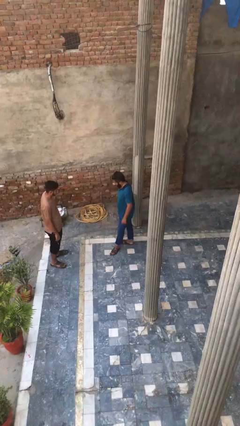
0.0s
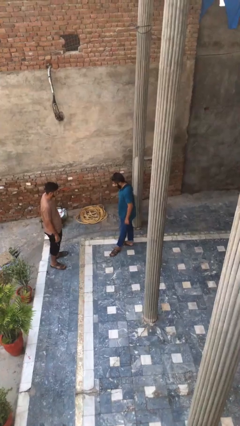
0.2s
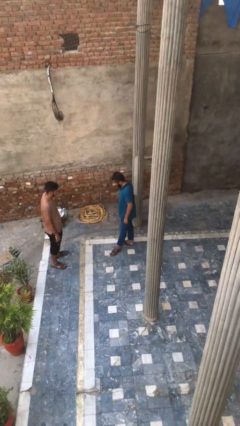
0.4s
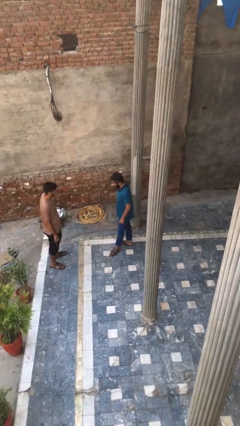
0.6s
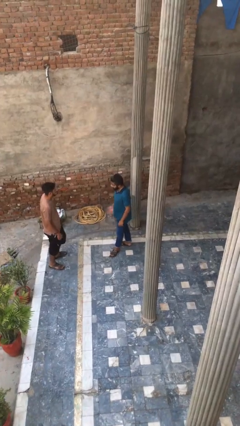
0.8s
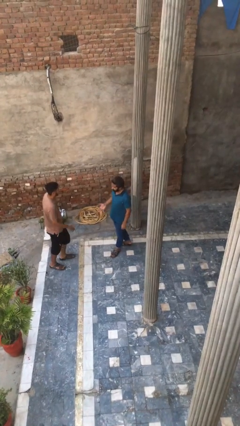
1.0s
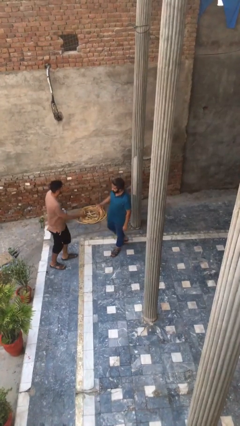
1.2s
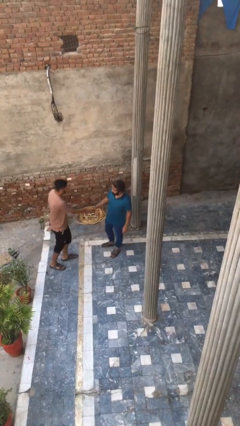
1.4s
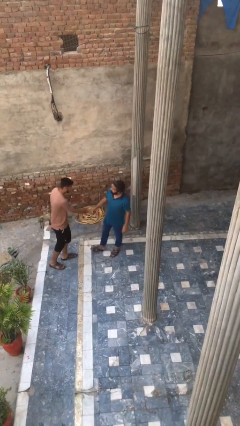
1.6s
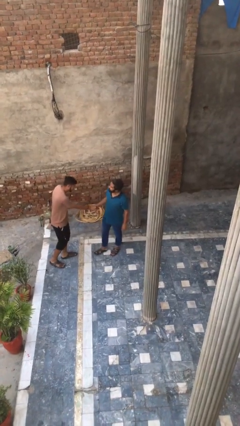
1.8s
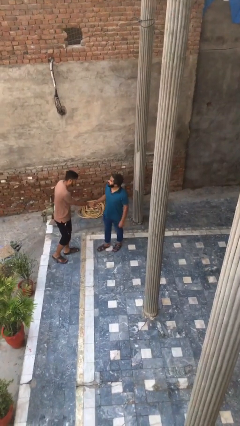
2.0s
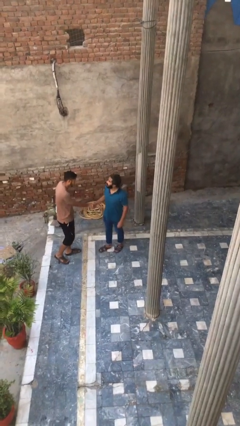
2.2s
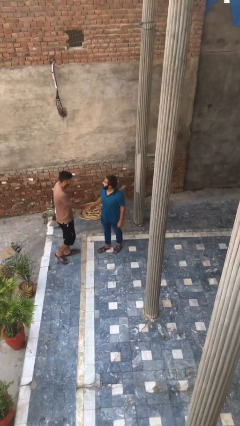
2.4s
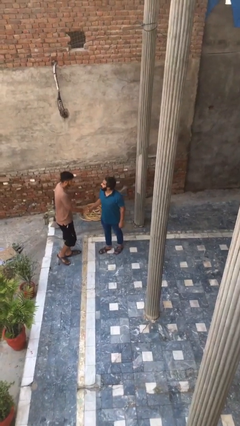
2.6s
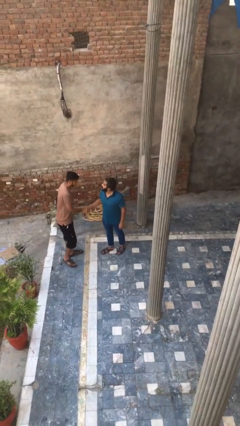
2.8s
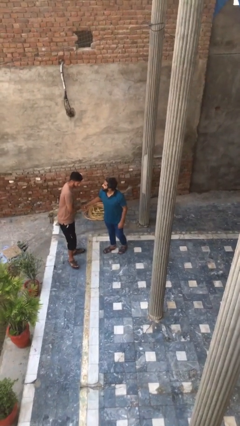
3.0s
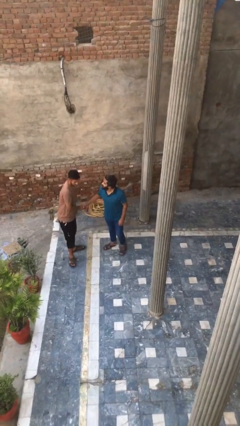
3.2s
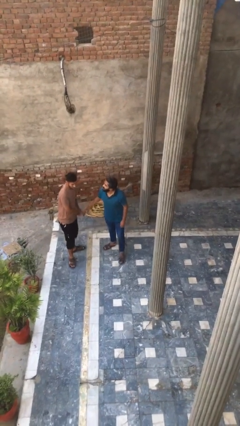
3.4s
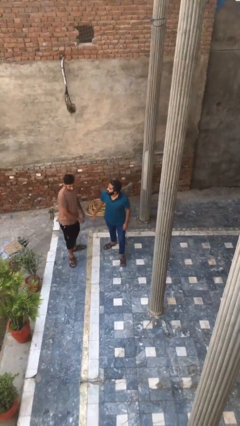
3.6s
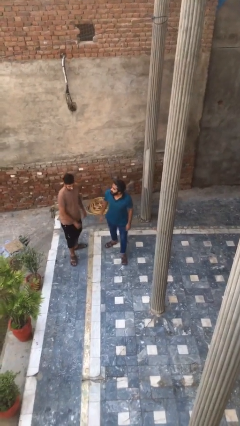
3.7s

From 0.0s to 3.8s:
person shakes hand

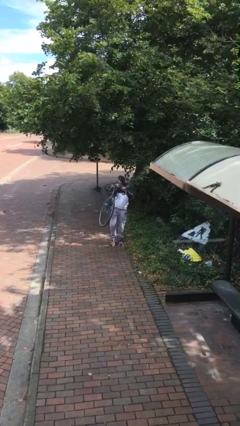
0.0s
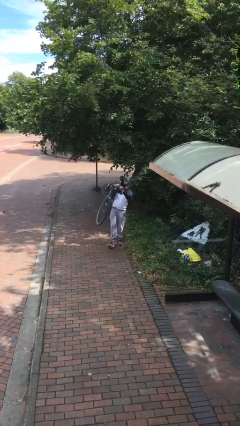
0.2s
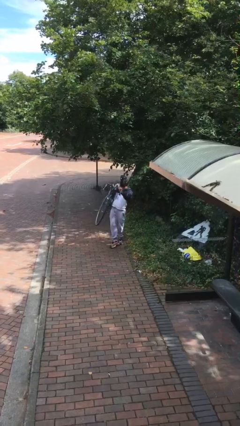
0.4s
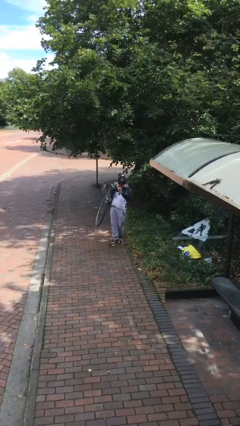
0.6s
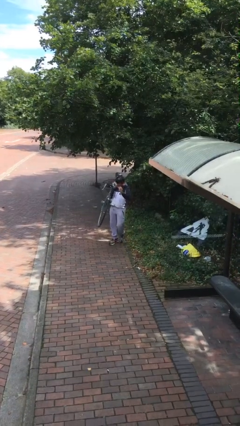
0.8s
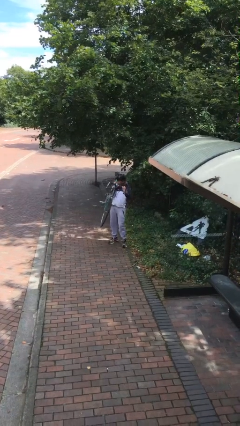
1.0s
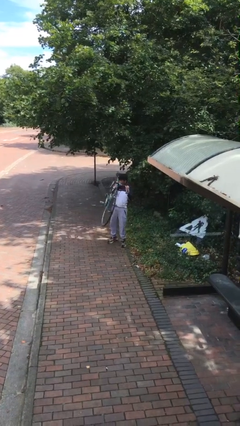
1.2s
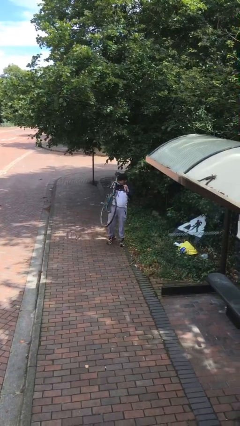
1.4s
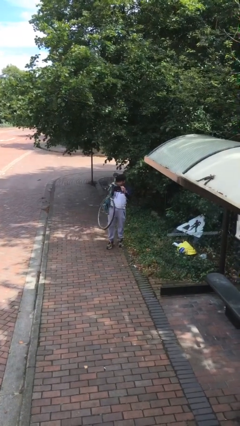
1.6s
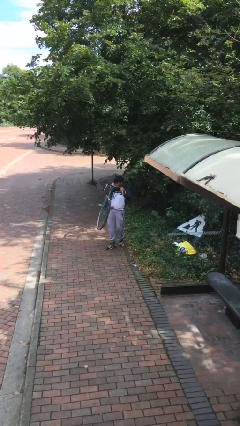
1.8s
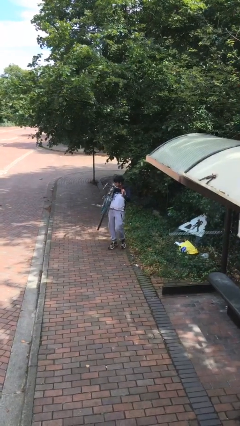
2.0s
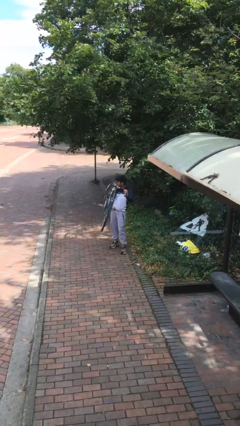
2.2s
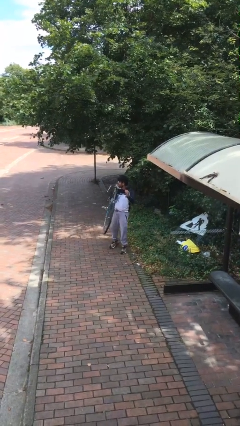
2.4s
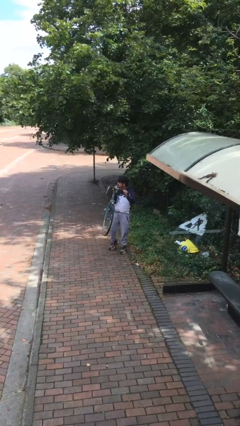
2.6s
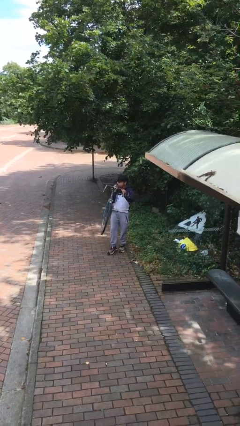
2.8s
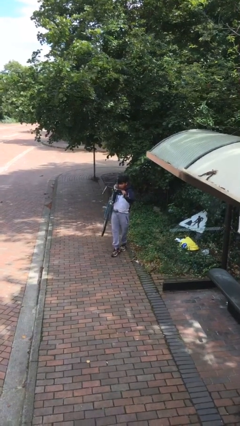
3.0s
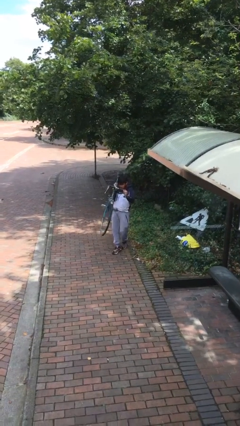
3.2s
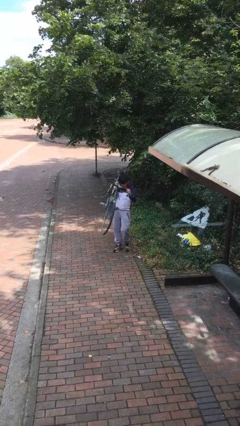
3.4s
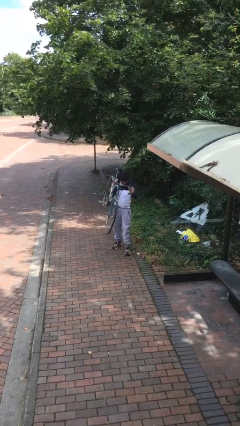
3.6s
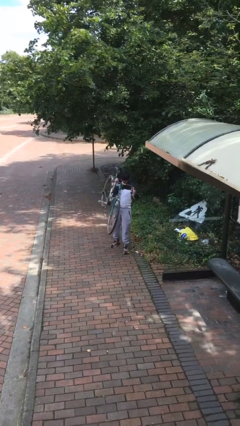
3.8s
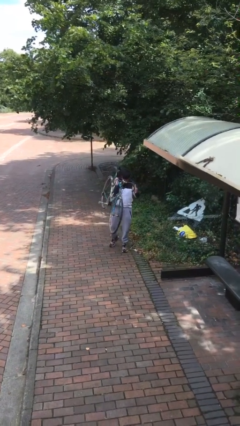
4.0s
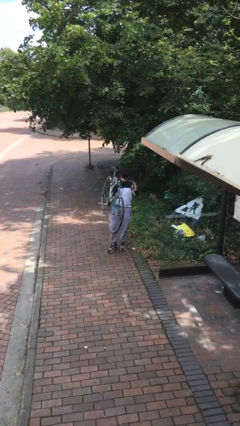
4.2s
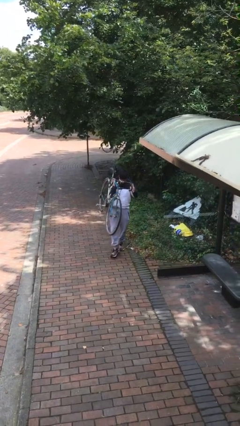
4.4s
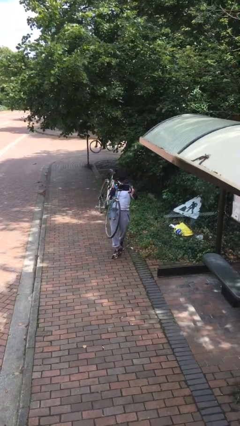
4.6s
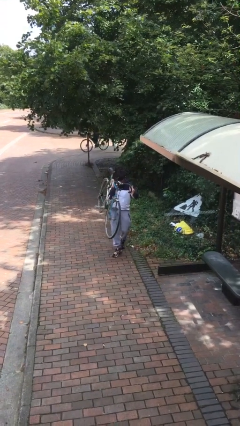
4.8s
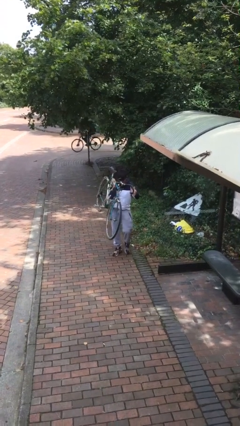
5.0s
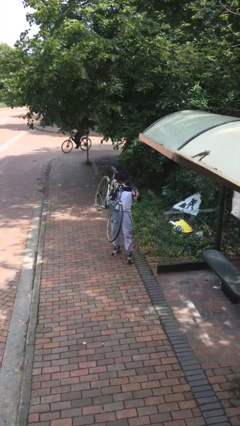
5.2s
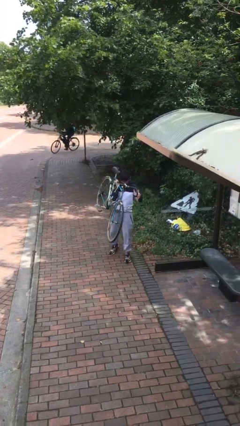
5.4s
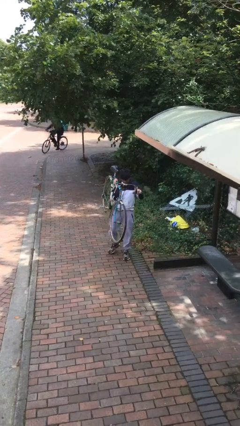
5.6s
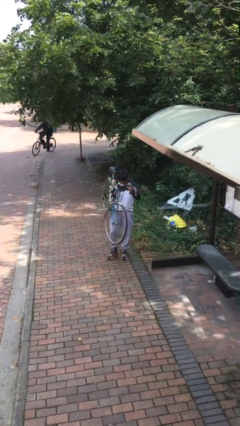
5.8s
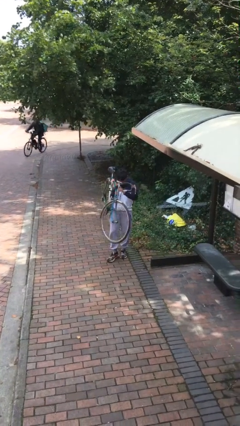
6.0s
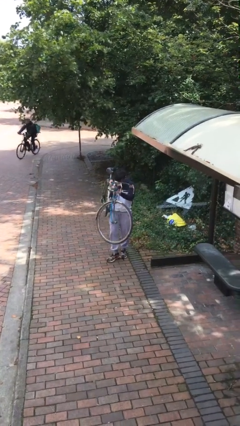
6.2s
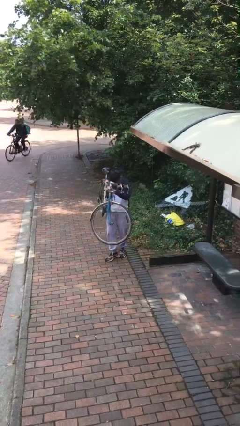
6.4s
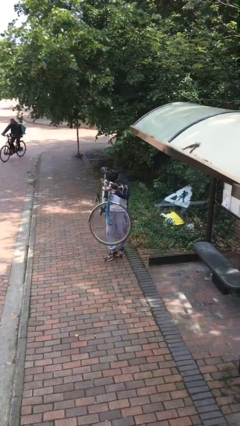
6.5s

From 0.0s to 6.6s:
person carries heavy object

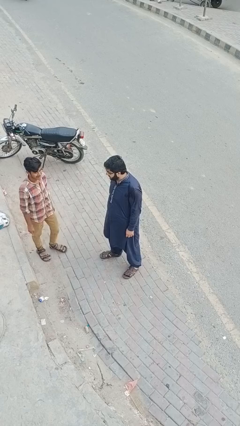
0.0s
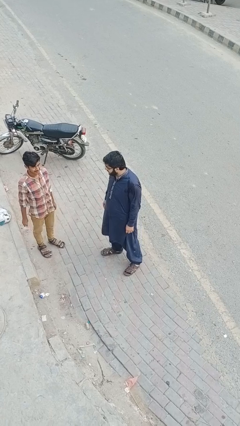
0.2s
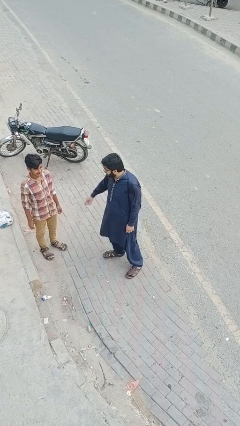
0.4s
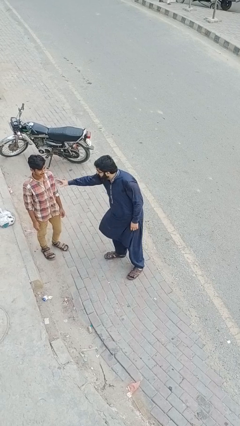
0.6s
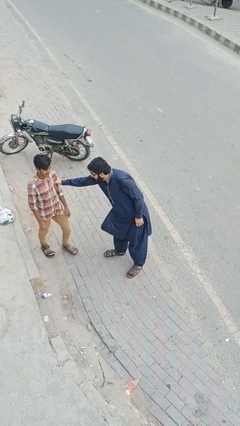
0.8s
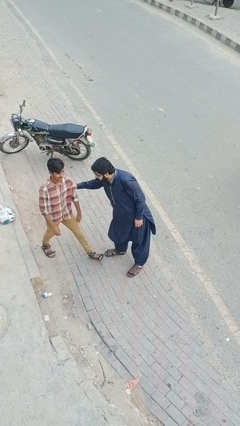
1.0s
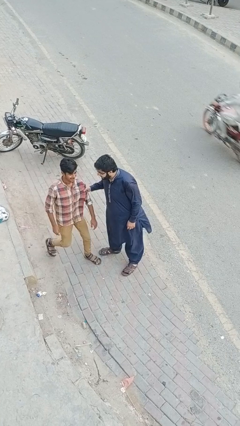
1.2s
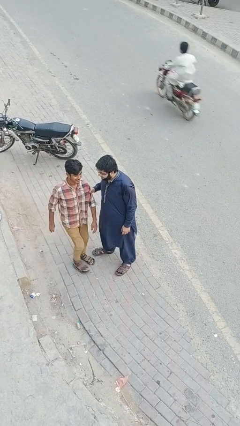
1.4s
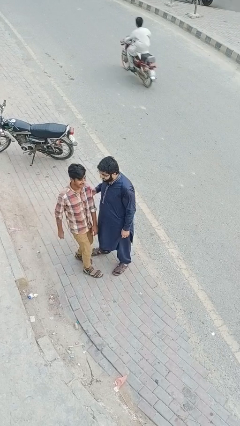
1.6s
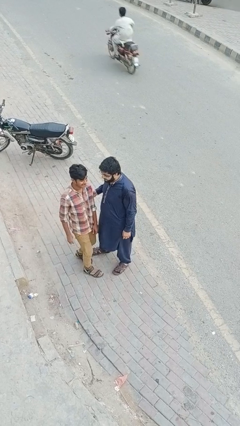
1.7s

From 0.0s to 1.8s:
person grabs person by bicep

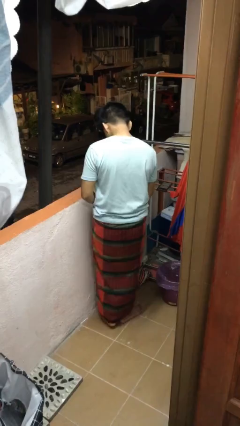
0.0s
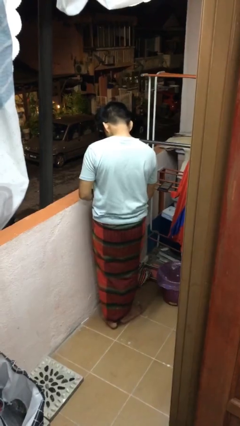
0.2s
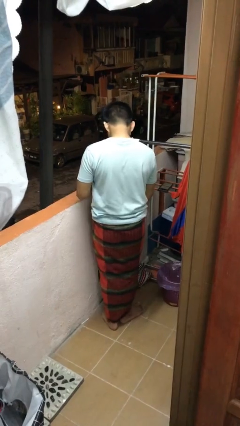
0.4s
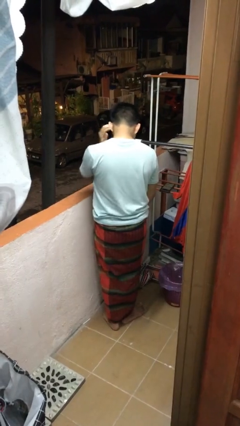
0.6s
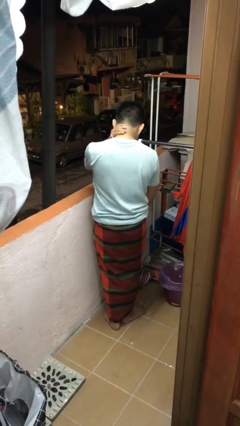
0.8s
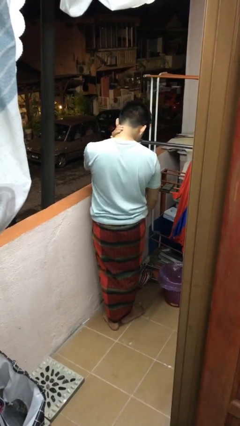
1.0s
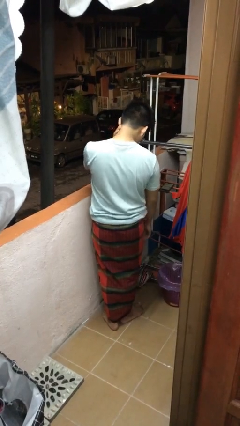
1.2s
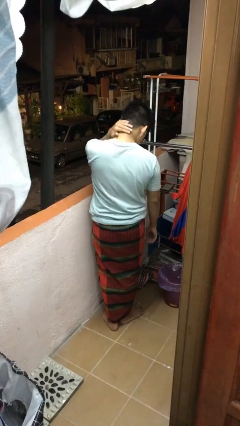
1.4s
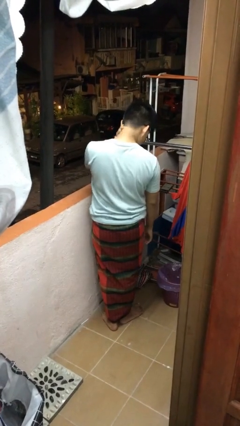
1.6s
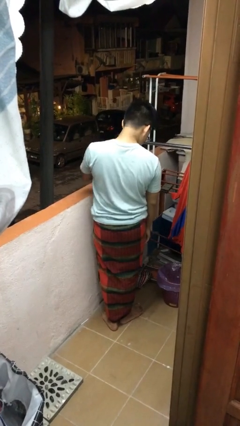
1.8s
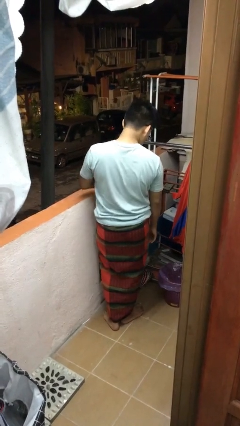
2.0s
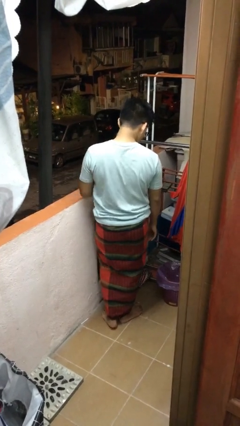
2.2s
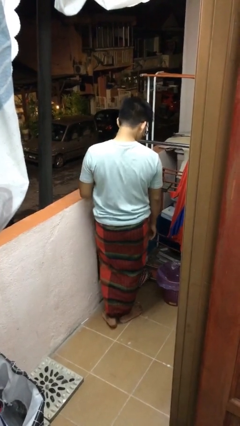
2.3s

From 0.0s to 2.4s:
person rubs neck

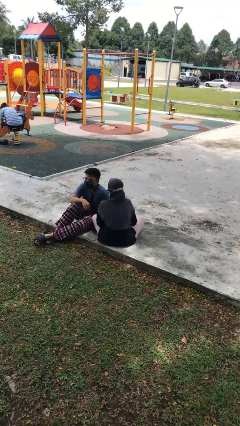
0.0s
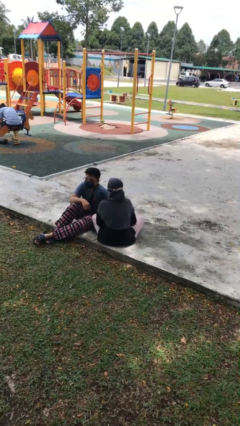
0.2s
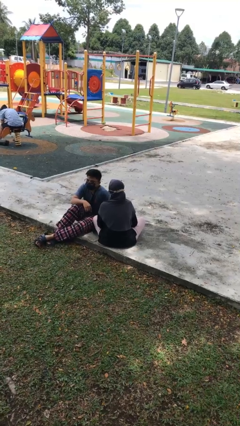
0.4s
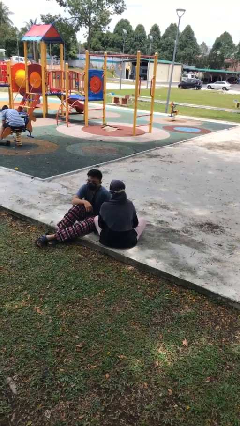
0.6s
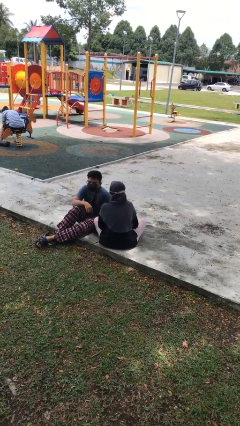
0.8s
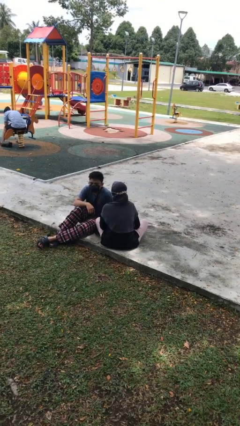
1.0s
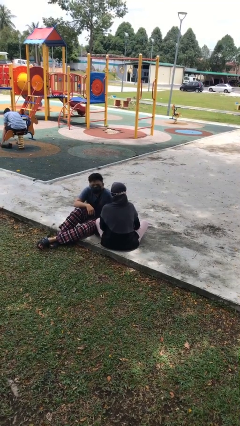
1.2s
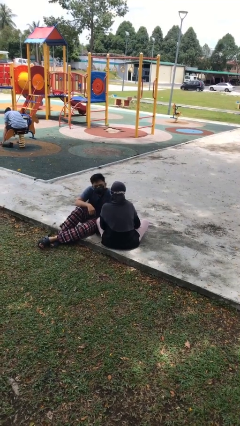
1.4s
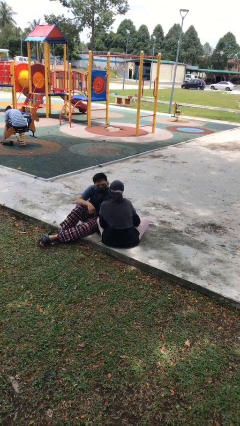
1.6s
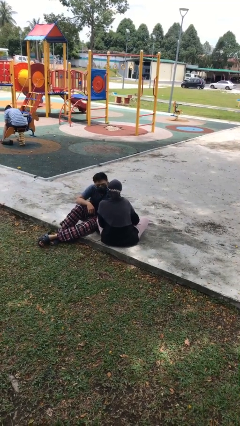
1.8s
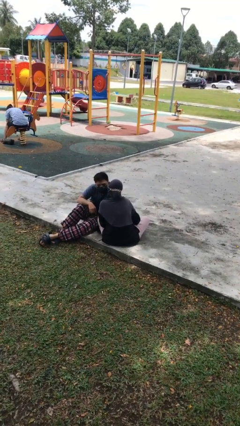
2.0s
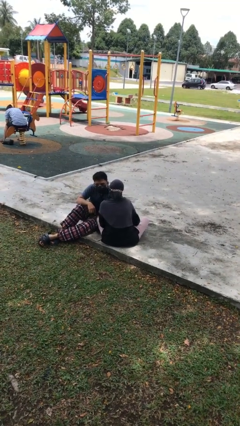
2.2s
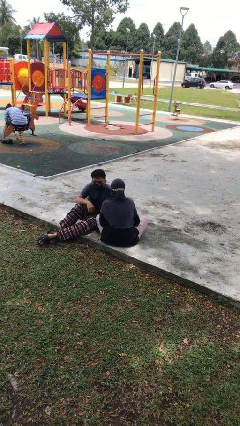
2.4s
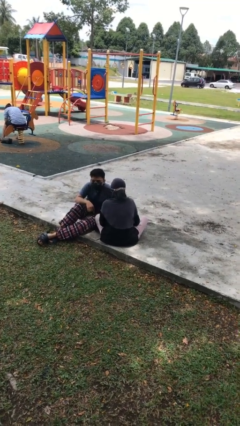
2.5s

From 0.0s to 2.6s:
person kisses cheek of person
